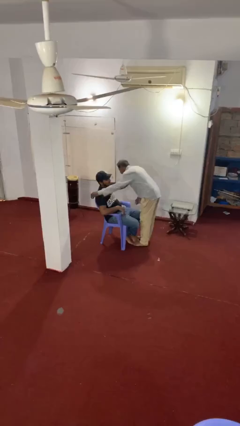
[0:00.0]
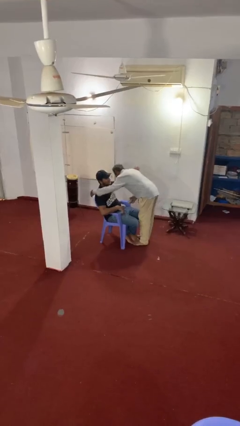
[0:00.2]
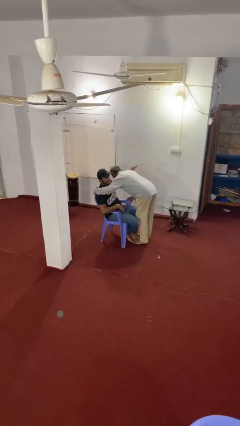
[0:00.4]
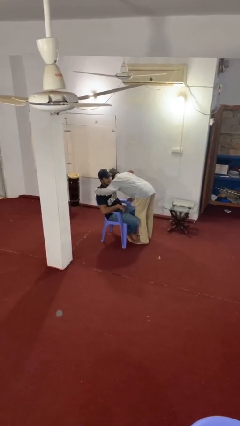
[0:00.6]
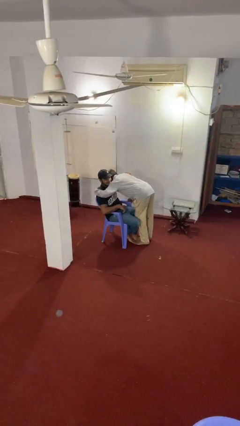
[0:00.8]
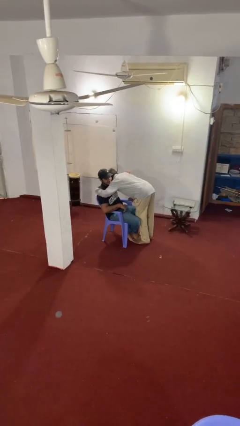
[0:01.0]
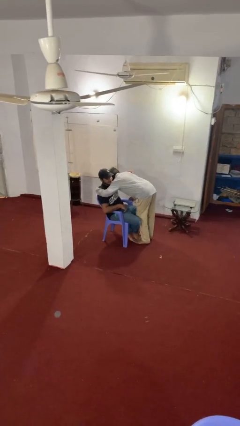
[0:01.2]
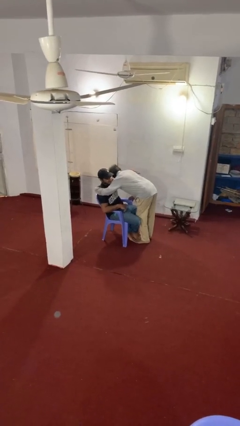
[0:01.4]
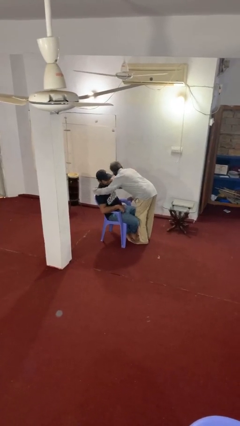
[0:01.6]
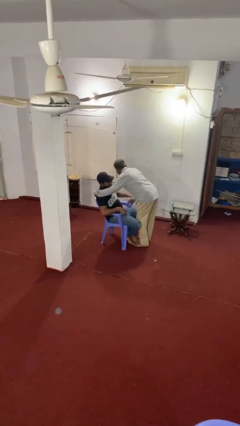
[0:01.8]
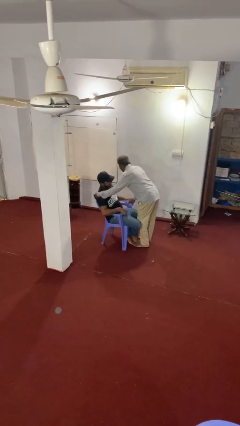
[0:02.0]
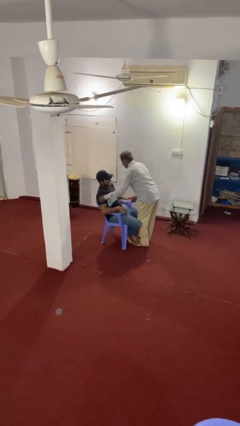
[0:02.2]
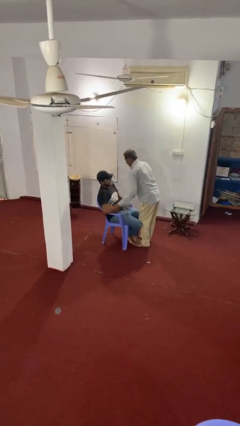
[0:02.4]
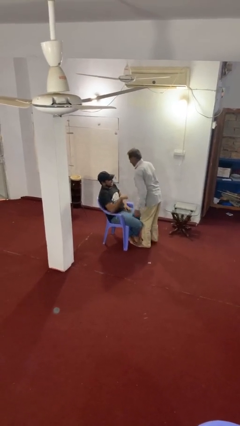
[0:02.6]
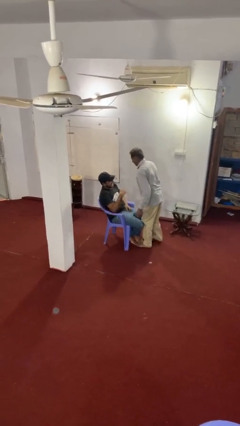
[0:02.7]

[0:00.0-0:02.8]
person embraces person

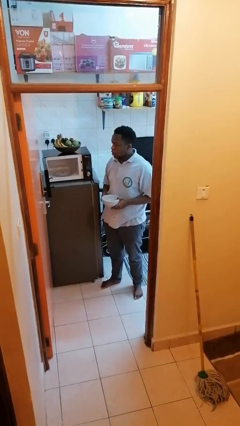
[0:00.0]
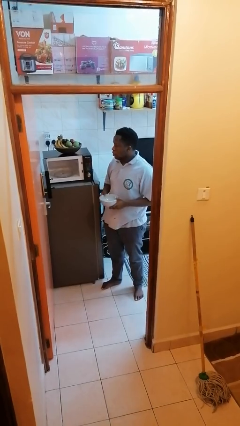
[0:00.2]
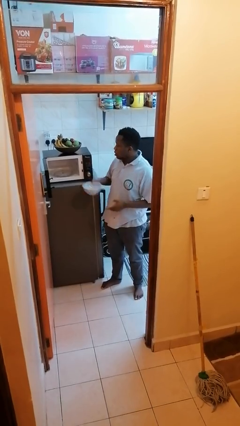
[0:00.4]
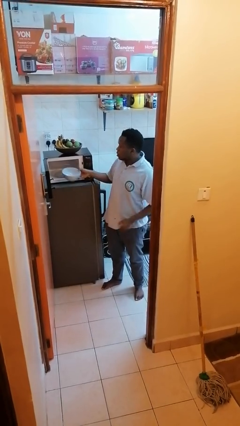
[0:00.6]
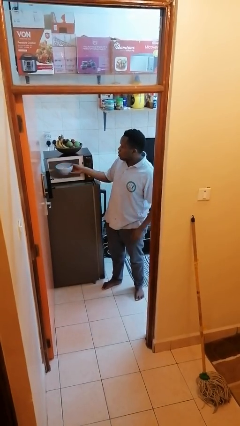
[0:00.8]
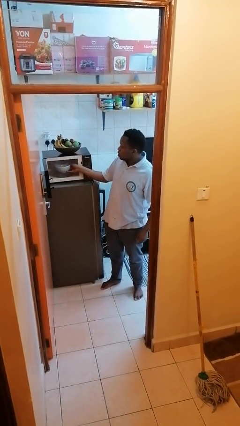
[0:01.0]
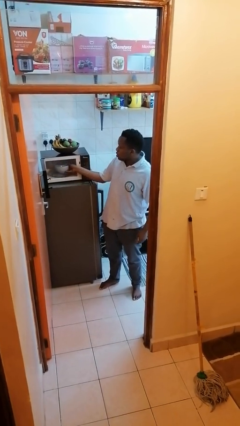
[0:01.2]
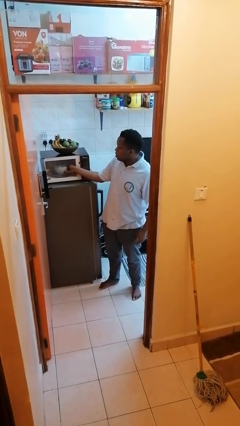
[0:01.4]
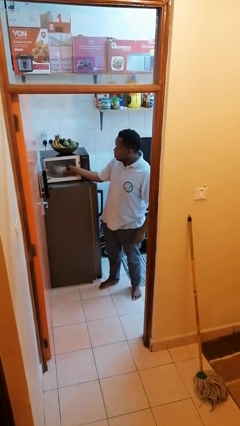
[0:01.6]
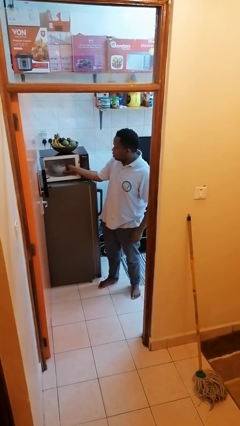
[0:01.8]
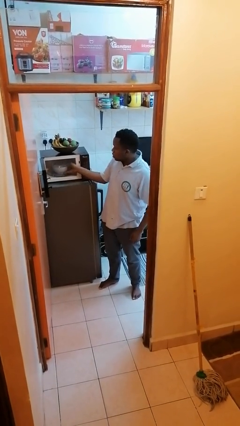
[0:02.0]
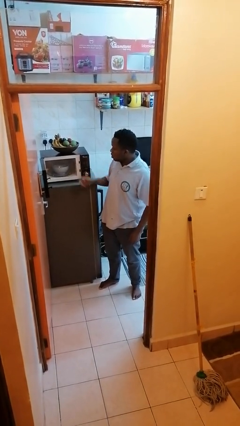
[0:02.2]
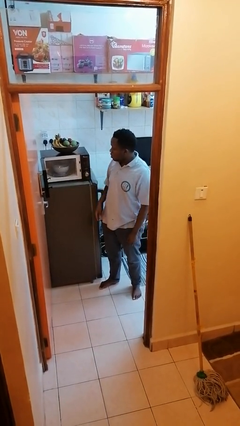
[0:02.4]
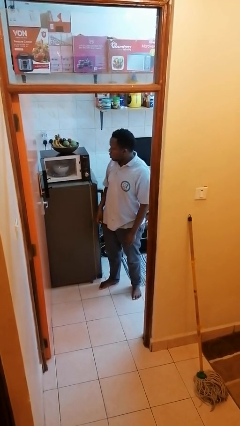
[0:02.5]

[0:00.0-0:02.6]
person puts object into microwave

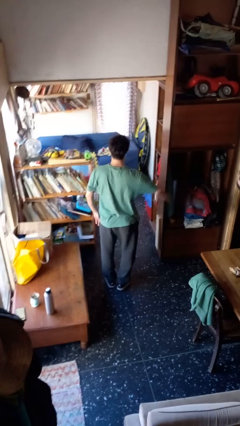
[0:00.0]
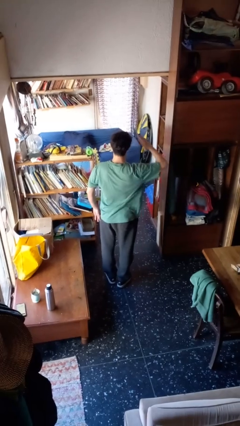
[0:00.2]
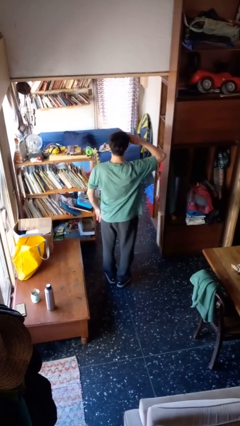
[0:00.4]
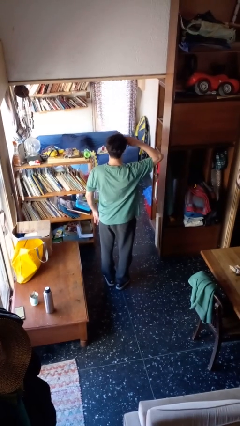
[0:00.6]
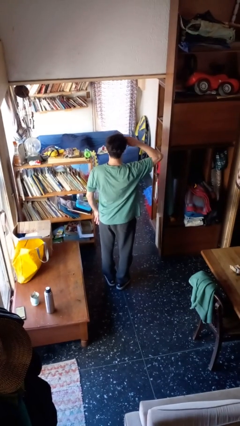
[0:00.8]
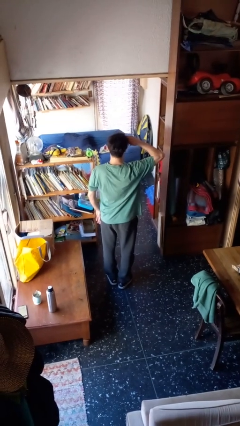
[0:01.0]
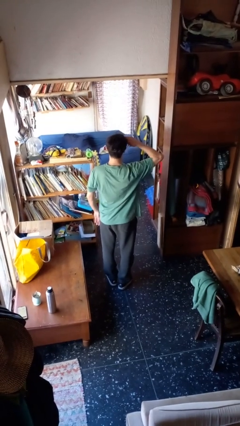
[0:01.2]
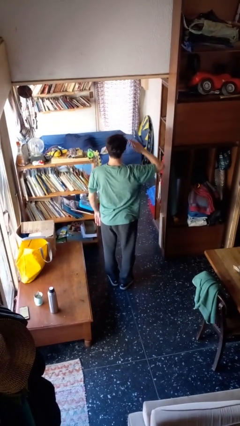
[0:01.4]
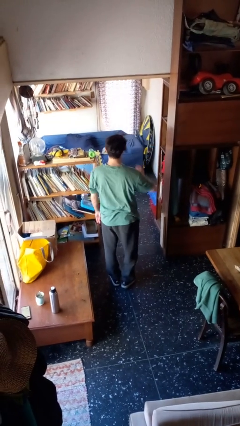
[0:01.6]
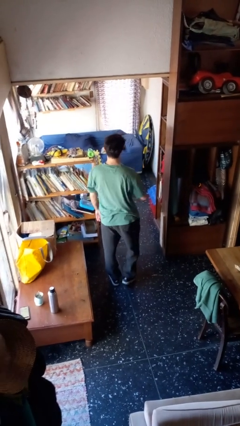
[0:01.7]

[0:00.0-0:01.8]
person salutes

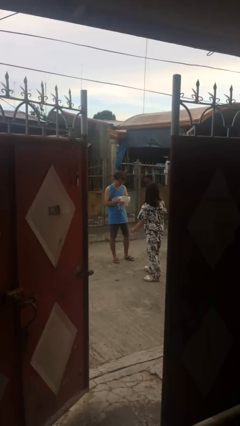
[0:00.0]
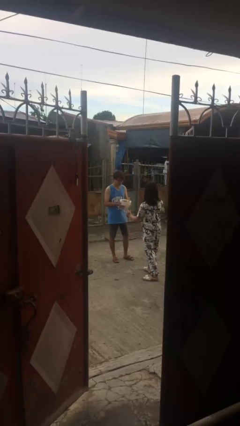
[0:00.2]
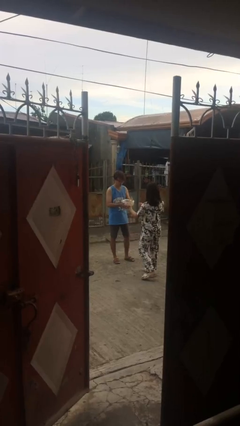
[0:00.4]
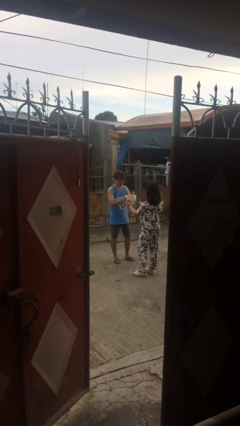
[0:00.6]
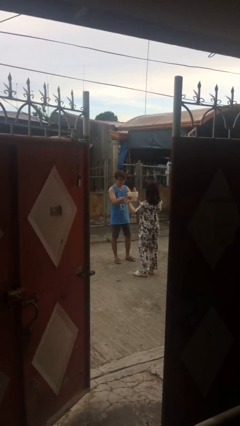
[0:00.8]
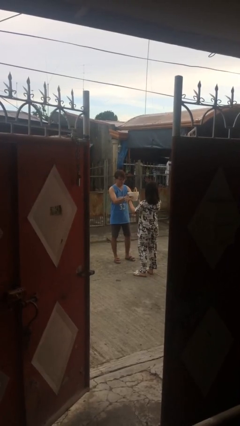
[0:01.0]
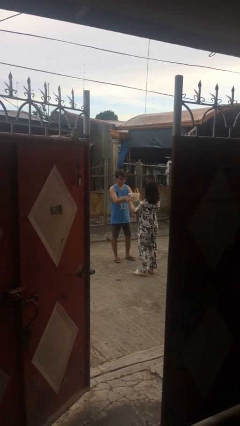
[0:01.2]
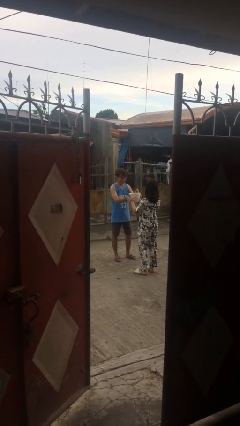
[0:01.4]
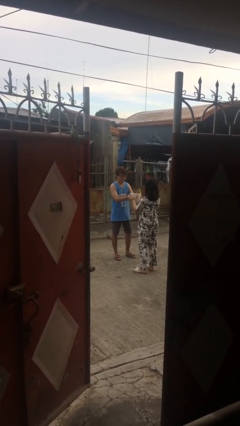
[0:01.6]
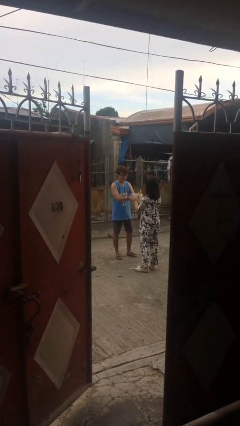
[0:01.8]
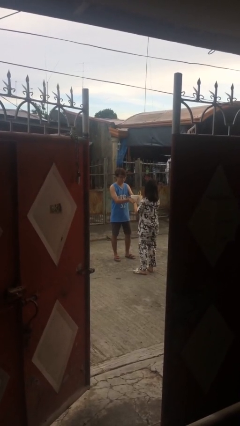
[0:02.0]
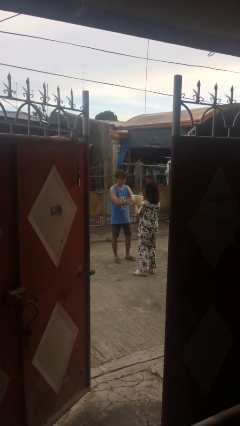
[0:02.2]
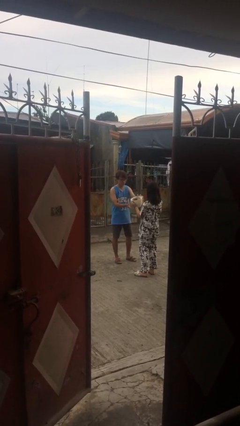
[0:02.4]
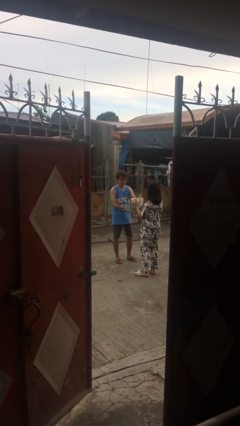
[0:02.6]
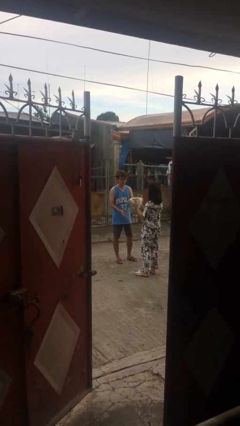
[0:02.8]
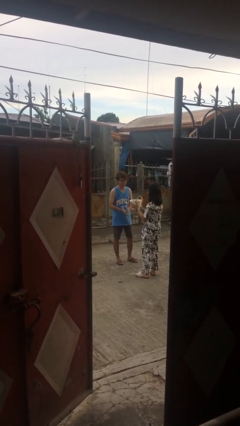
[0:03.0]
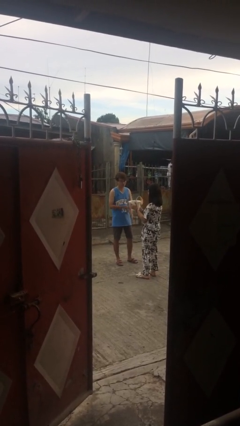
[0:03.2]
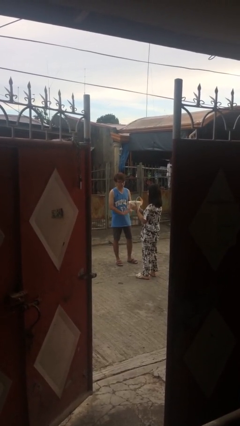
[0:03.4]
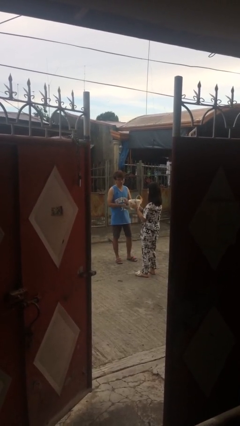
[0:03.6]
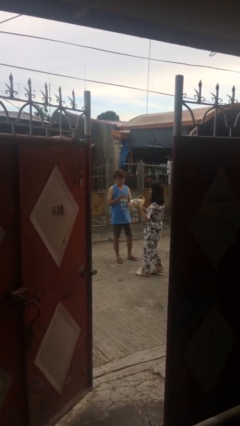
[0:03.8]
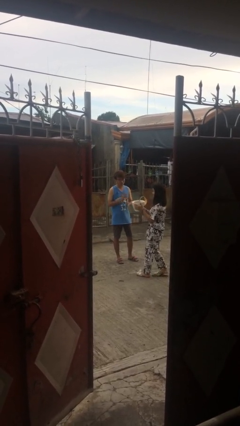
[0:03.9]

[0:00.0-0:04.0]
person transfers object to person

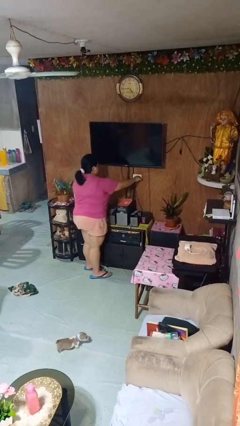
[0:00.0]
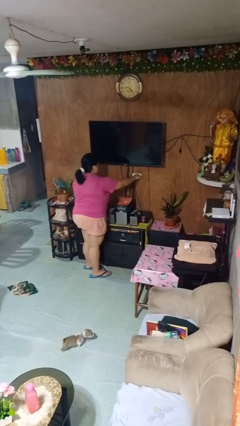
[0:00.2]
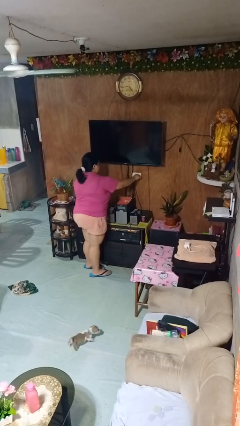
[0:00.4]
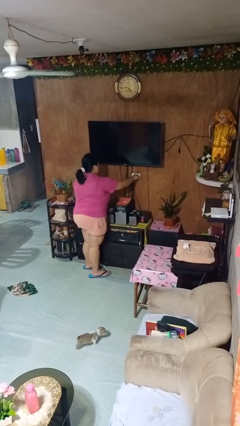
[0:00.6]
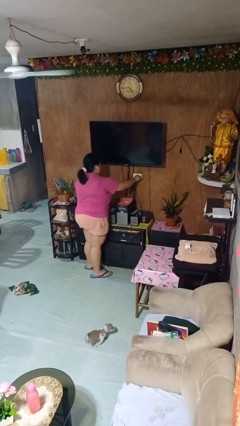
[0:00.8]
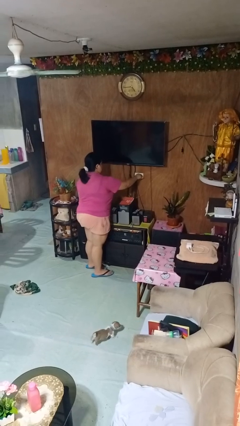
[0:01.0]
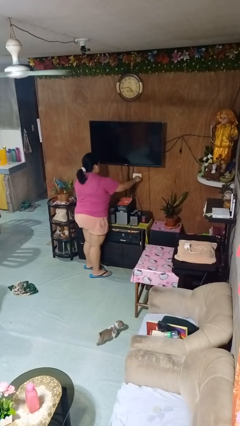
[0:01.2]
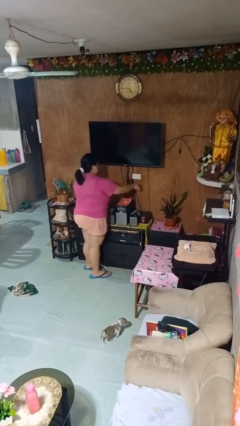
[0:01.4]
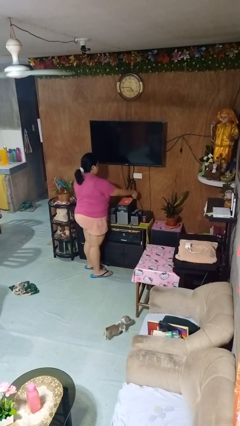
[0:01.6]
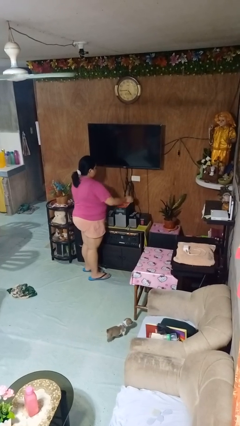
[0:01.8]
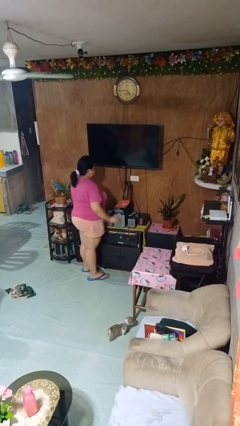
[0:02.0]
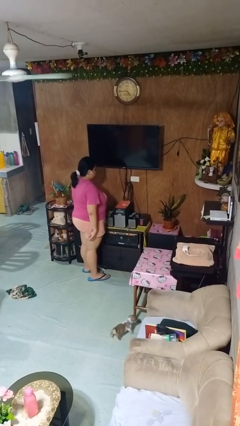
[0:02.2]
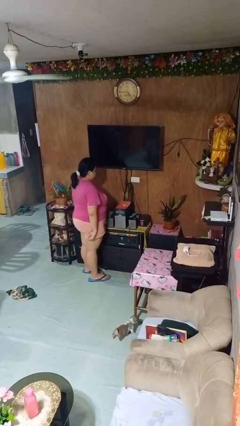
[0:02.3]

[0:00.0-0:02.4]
person unplugs from electrical socket

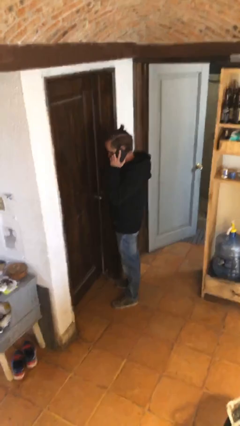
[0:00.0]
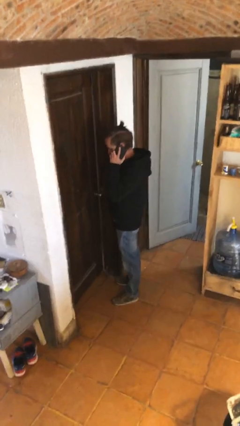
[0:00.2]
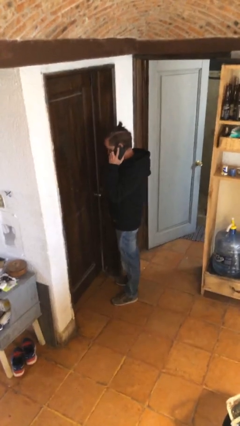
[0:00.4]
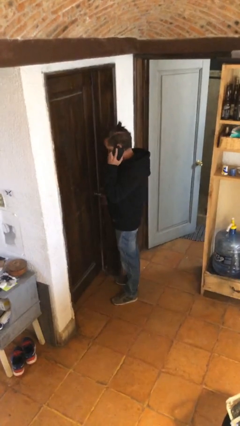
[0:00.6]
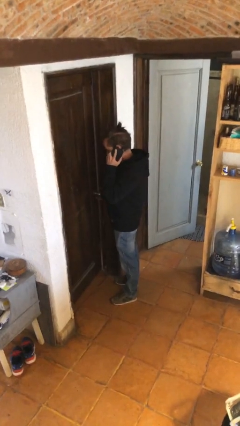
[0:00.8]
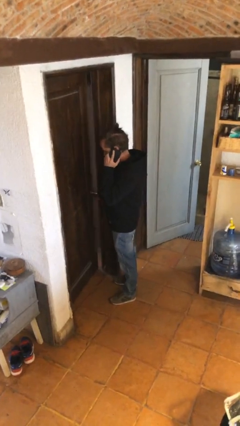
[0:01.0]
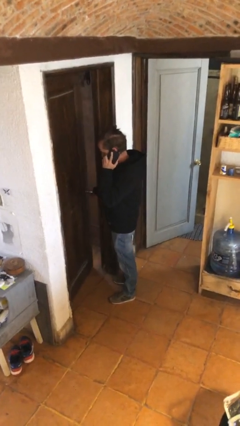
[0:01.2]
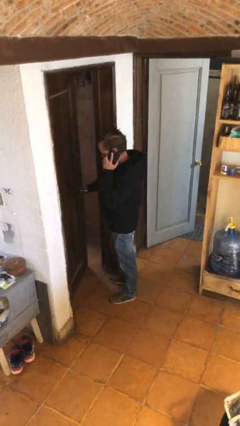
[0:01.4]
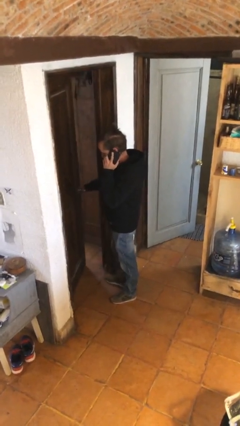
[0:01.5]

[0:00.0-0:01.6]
person opens facility door

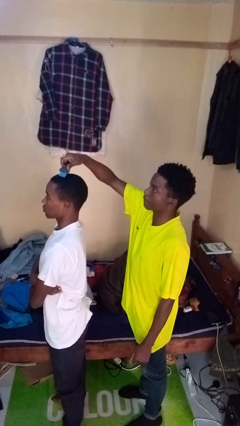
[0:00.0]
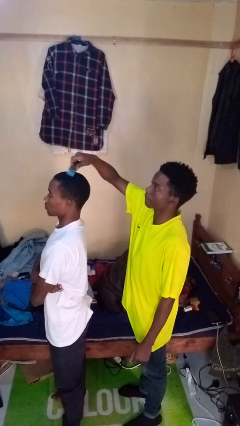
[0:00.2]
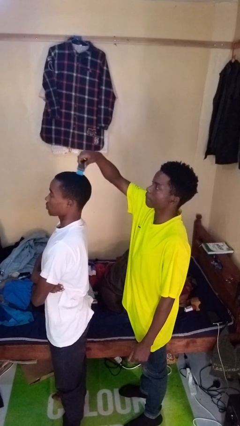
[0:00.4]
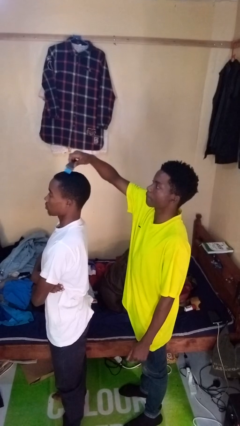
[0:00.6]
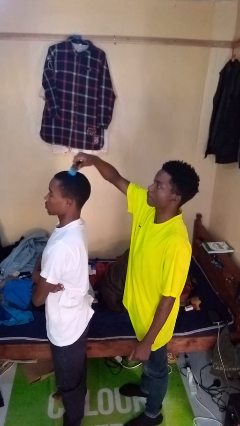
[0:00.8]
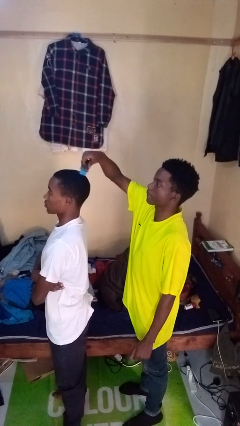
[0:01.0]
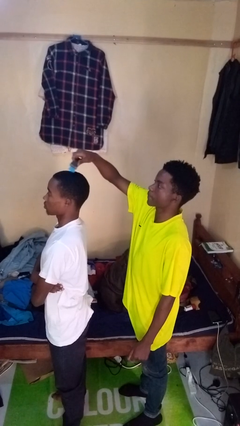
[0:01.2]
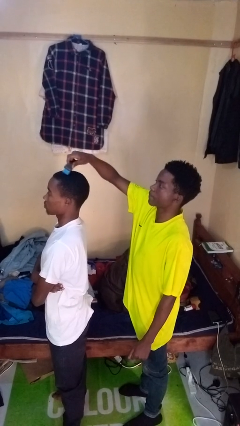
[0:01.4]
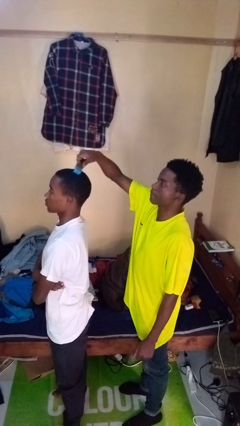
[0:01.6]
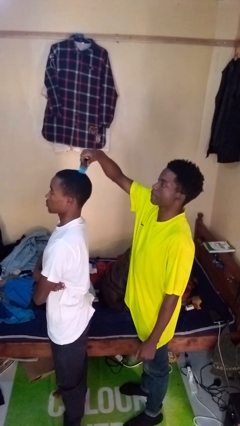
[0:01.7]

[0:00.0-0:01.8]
person brushes hair of person

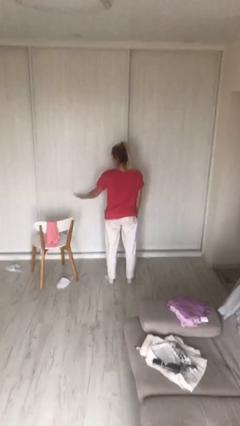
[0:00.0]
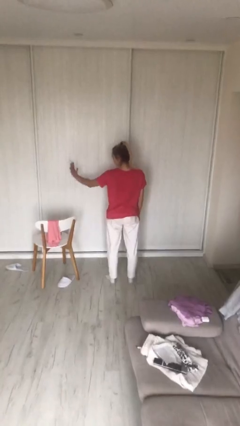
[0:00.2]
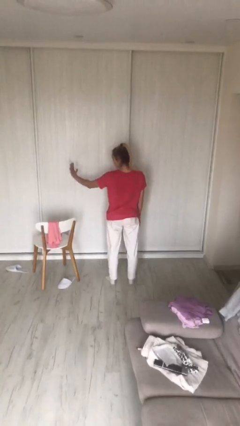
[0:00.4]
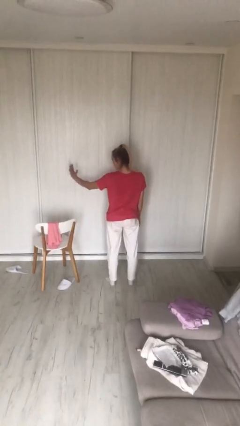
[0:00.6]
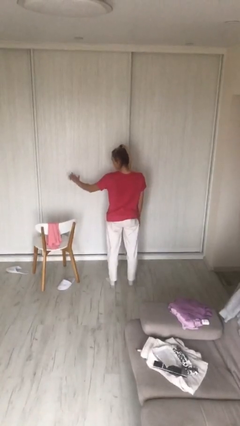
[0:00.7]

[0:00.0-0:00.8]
person gestures stop
